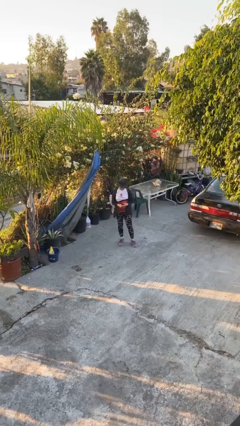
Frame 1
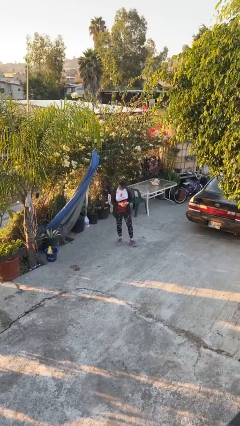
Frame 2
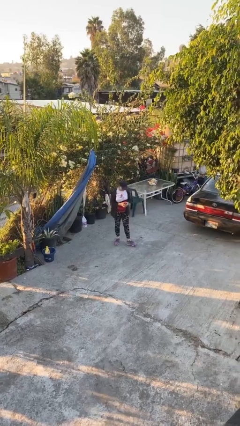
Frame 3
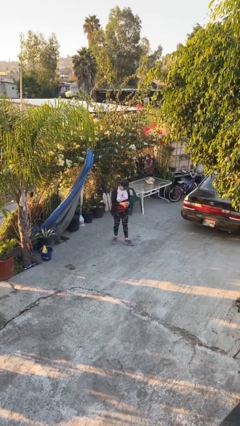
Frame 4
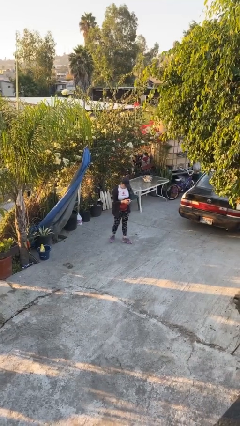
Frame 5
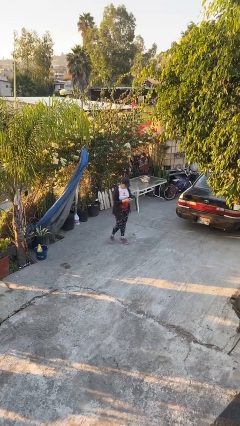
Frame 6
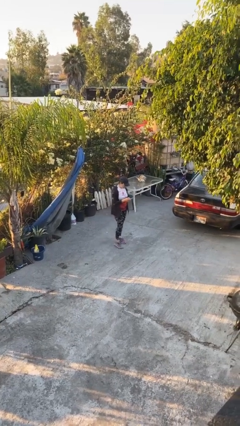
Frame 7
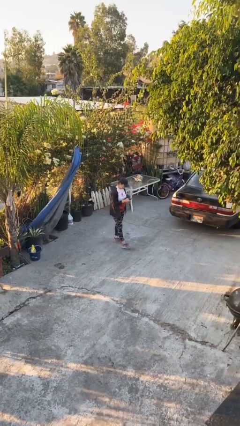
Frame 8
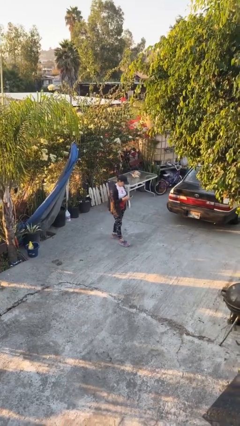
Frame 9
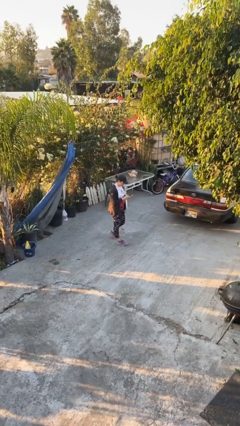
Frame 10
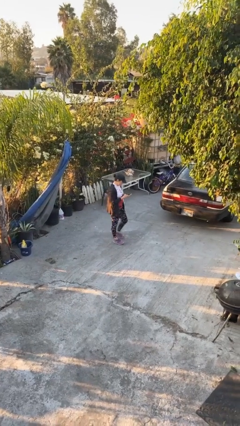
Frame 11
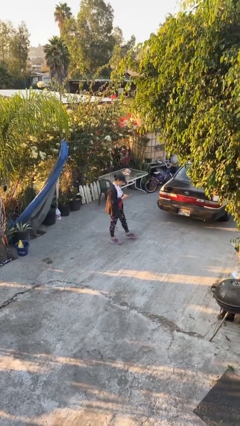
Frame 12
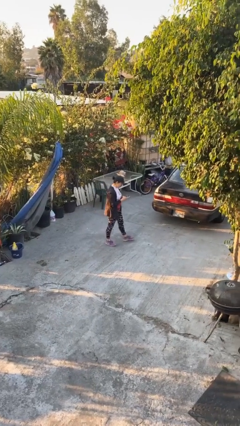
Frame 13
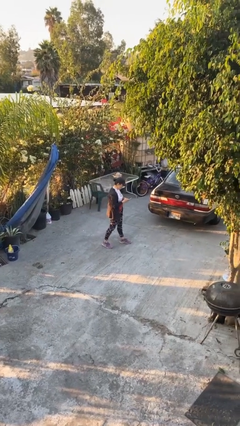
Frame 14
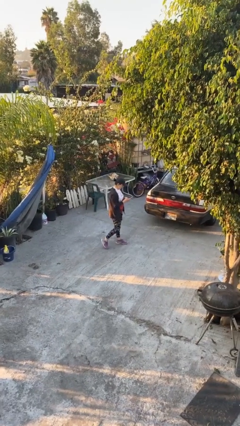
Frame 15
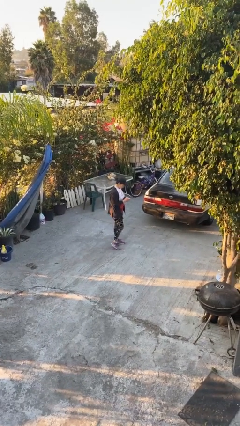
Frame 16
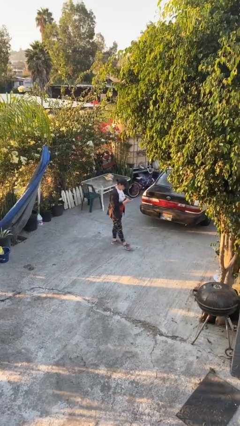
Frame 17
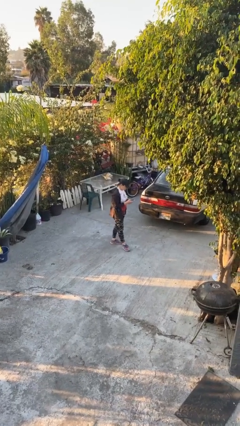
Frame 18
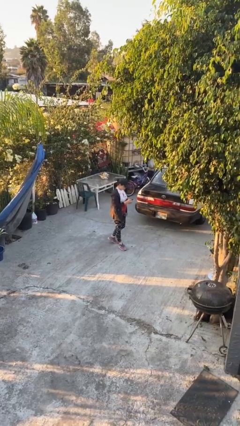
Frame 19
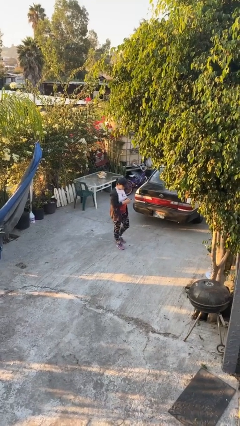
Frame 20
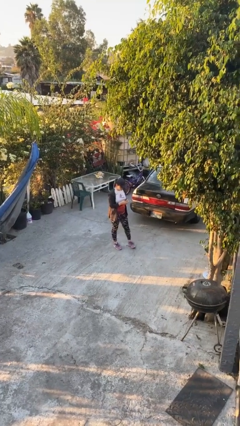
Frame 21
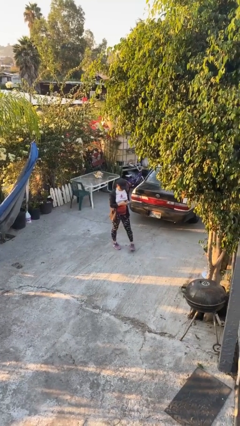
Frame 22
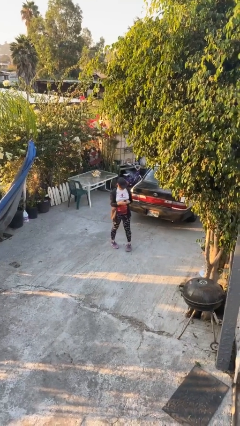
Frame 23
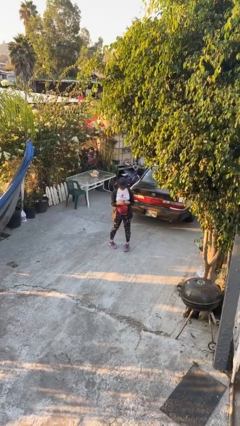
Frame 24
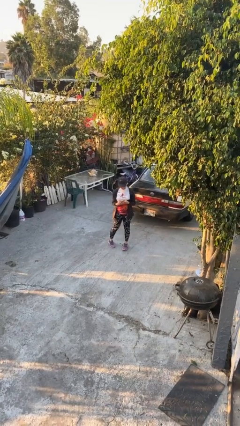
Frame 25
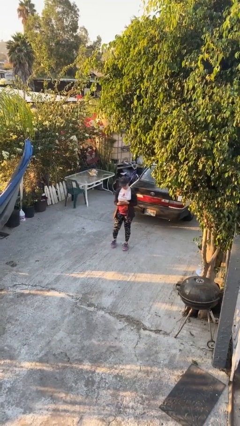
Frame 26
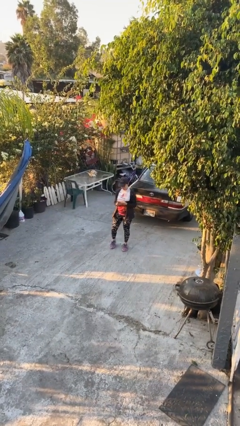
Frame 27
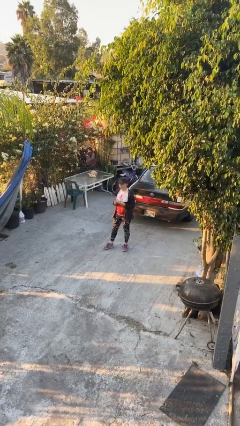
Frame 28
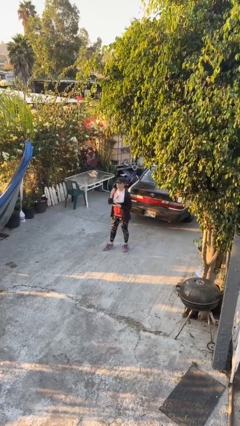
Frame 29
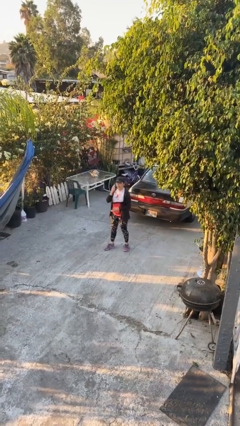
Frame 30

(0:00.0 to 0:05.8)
person texts on phone

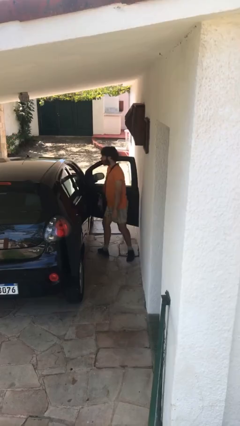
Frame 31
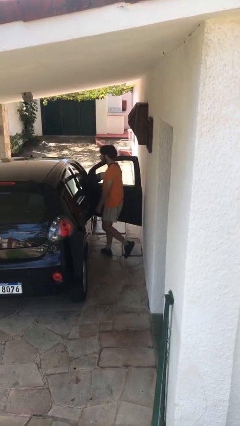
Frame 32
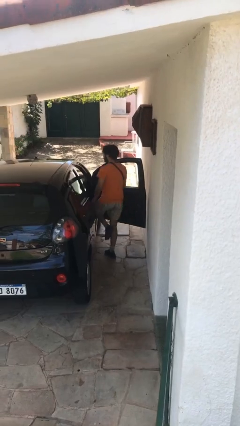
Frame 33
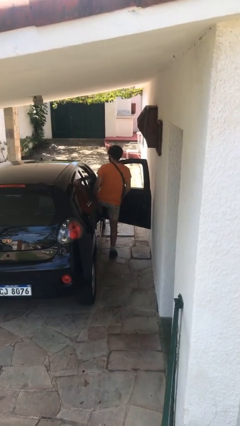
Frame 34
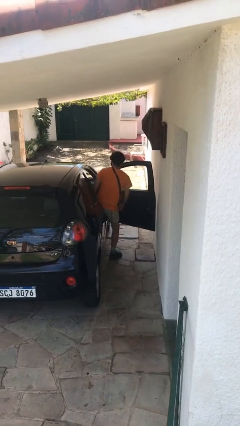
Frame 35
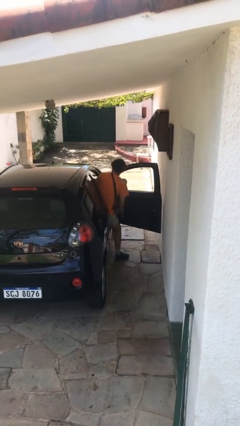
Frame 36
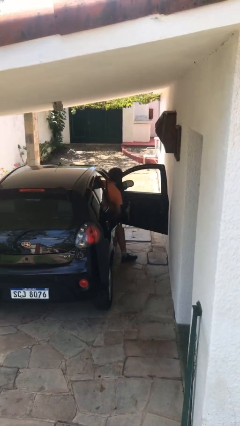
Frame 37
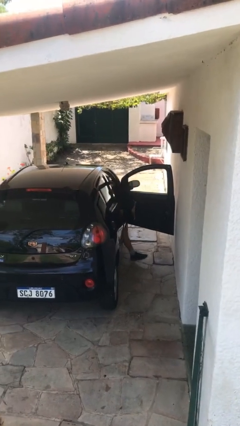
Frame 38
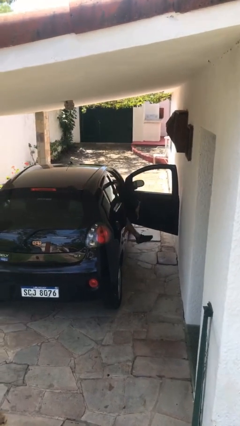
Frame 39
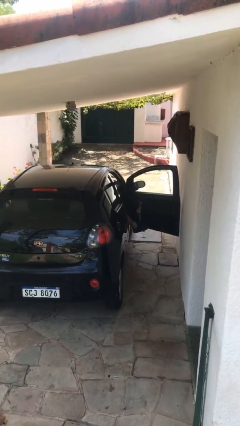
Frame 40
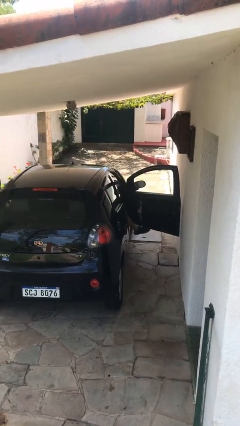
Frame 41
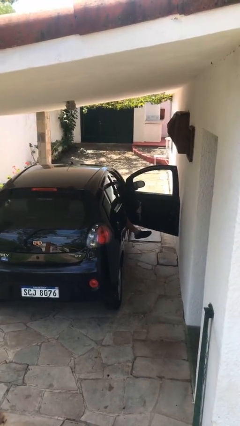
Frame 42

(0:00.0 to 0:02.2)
person enters car

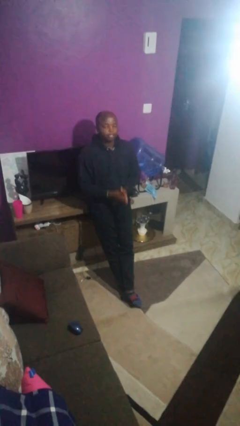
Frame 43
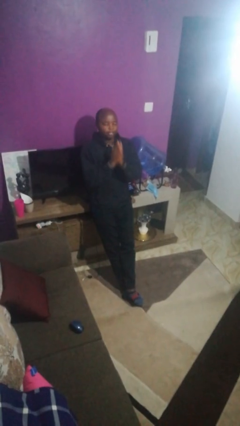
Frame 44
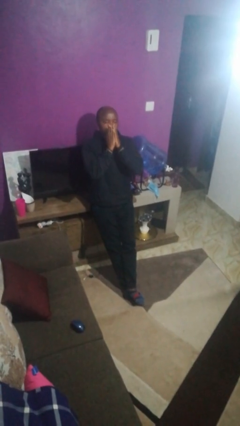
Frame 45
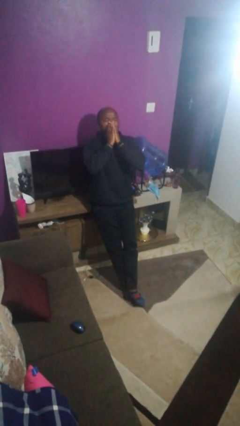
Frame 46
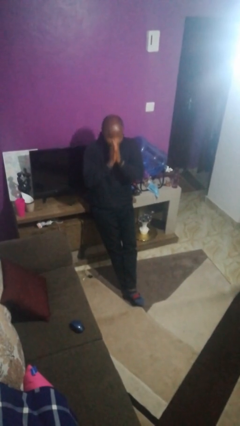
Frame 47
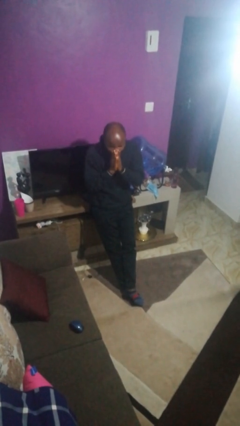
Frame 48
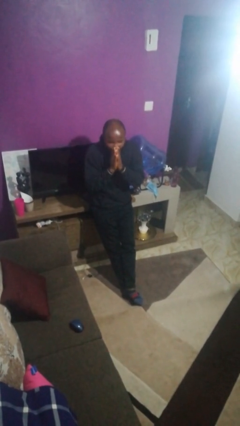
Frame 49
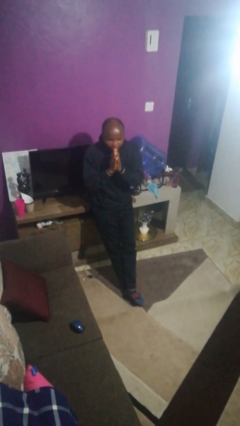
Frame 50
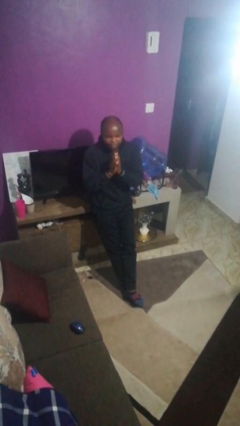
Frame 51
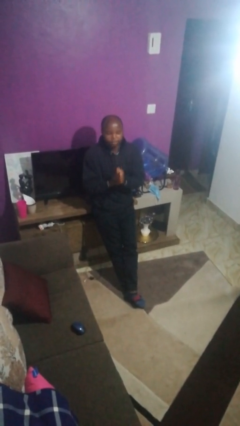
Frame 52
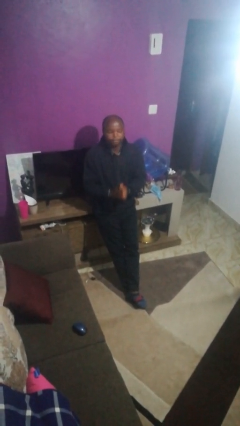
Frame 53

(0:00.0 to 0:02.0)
person sneezes into hand

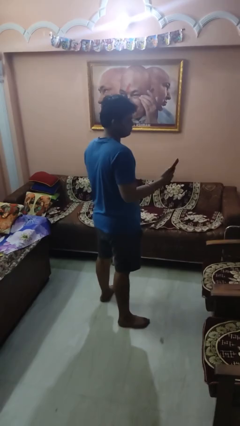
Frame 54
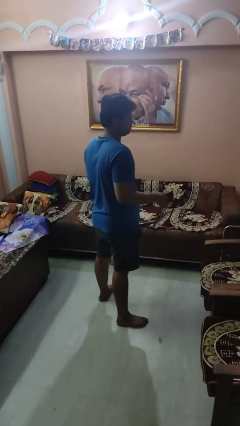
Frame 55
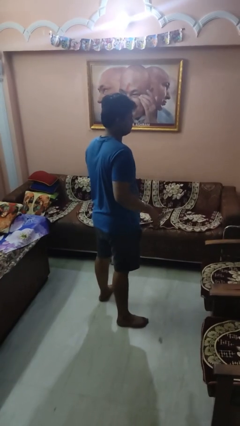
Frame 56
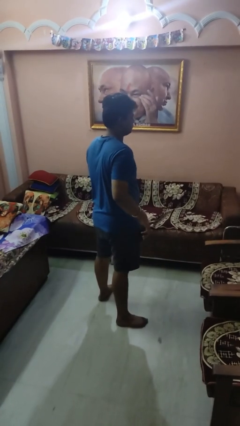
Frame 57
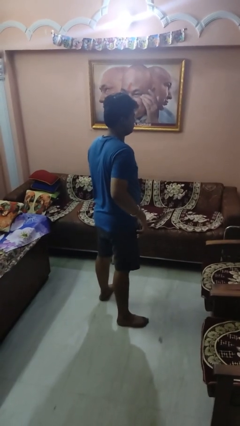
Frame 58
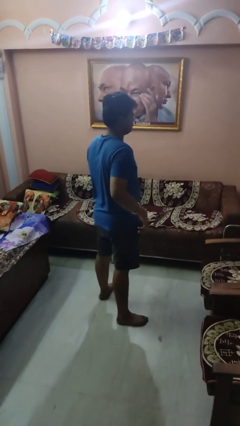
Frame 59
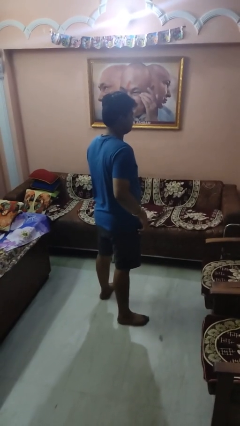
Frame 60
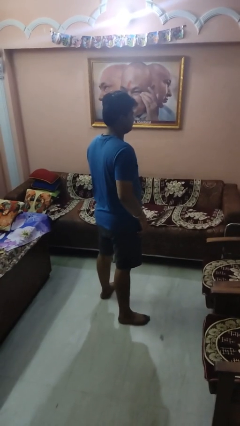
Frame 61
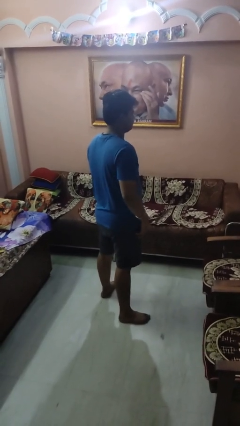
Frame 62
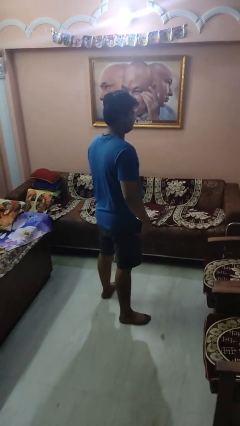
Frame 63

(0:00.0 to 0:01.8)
person puts phone into pocket

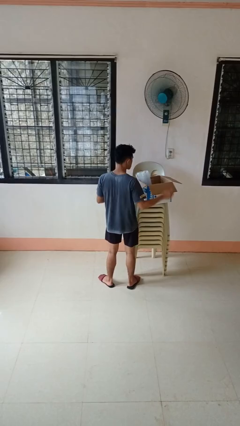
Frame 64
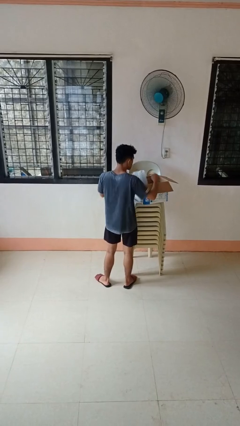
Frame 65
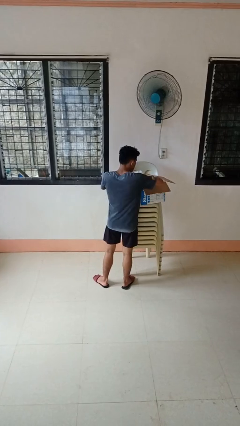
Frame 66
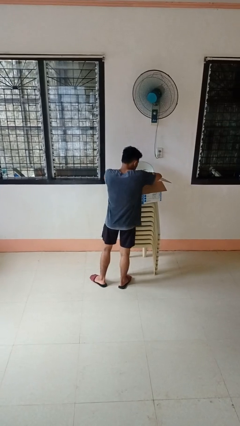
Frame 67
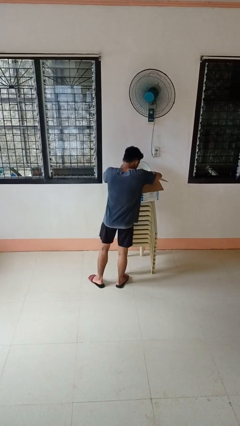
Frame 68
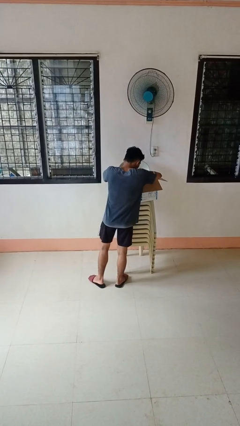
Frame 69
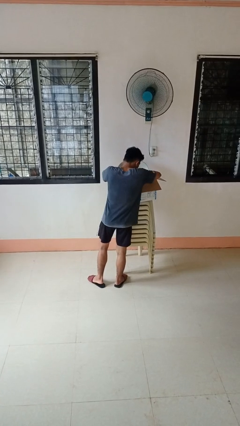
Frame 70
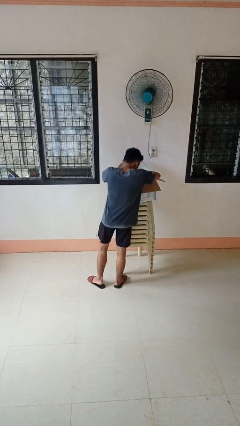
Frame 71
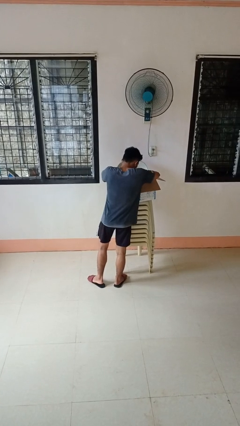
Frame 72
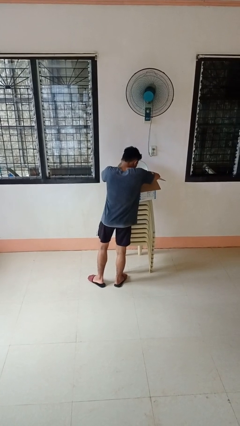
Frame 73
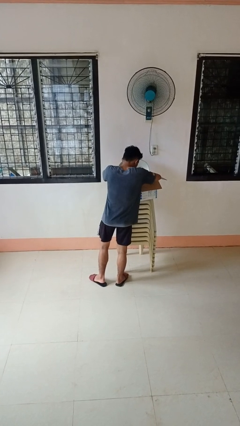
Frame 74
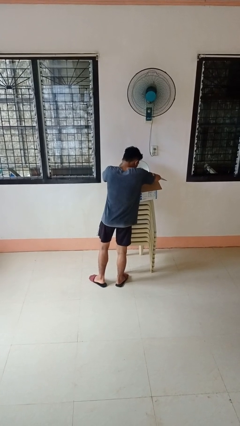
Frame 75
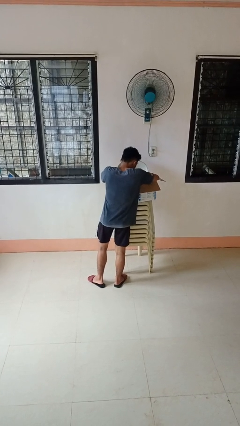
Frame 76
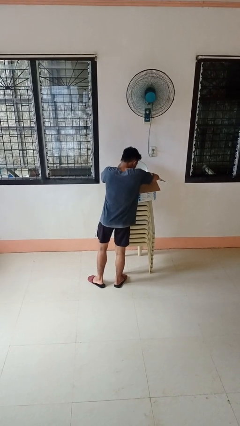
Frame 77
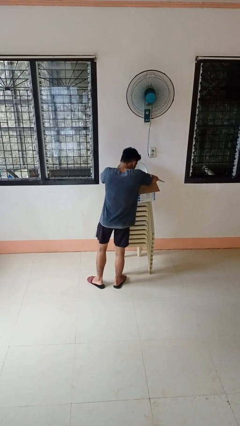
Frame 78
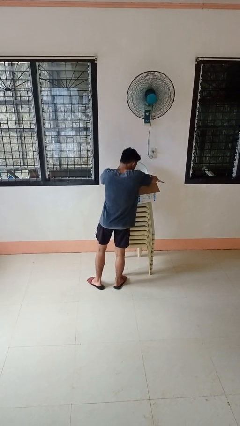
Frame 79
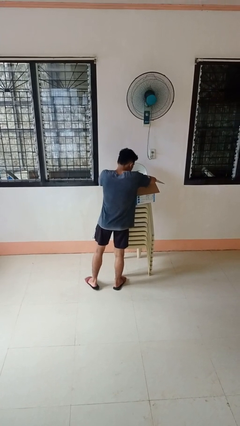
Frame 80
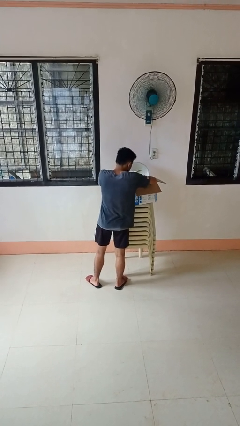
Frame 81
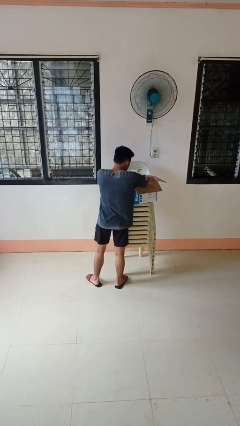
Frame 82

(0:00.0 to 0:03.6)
person searches in box

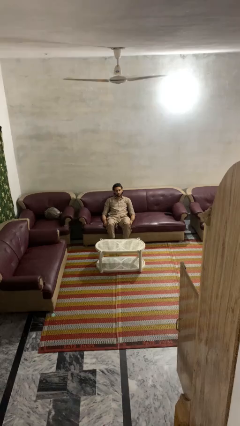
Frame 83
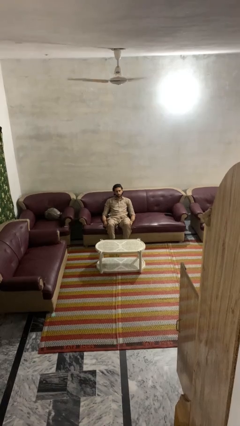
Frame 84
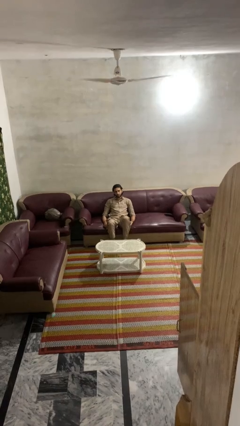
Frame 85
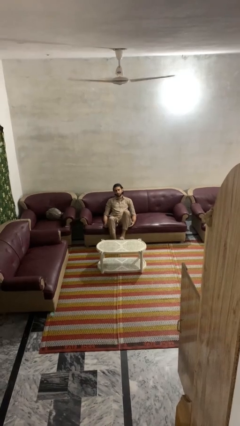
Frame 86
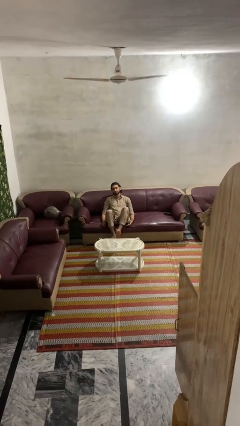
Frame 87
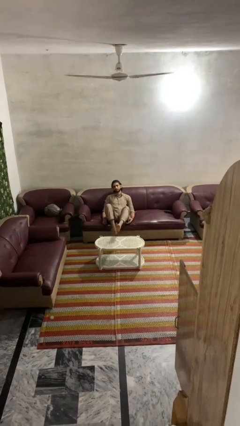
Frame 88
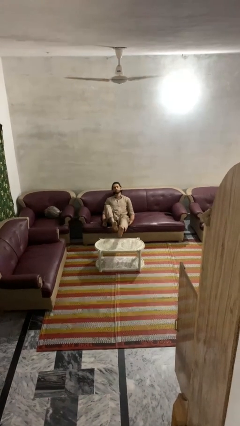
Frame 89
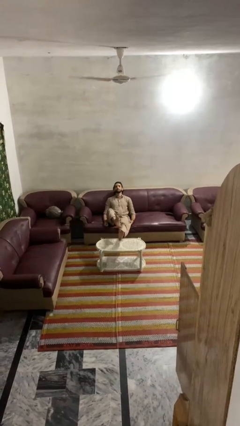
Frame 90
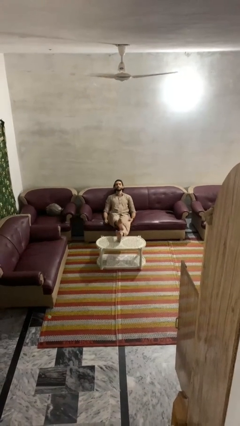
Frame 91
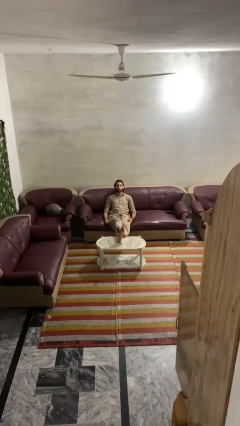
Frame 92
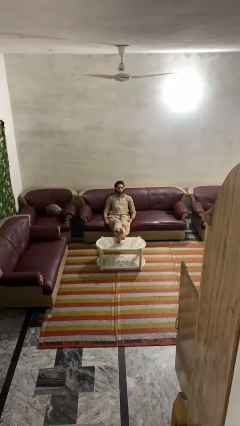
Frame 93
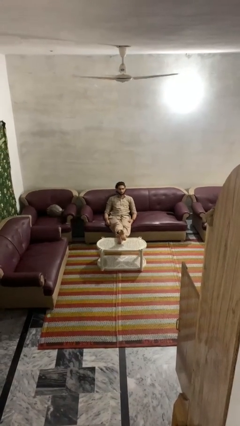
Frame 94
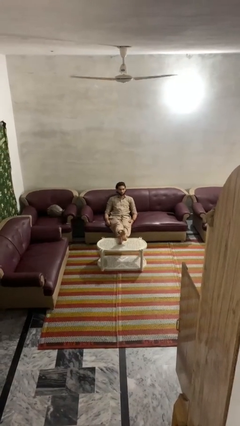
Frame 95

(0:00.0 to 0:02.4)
person puts feet up
